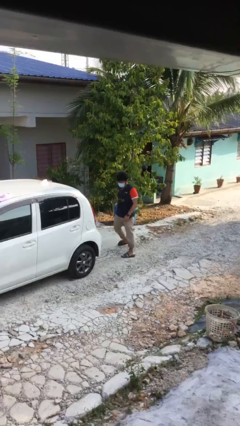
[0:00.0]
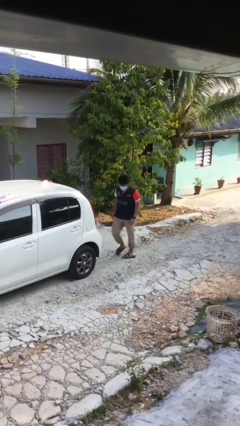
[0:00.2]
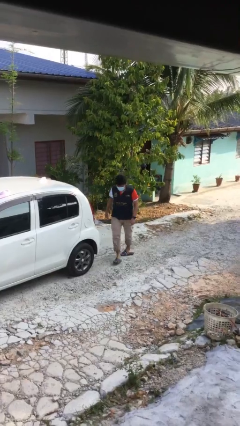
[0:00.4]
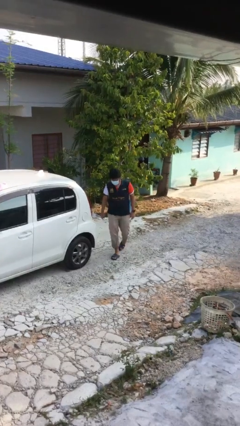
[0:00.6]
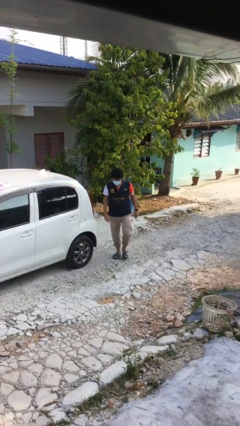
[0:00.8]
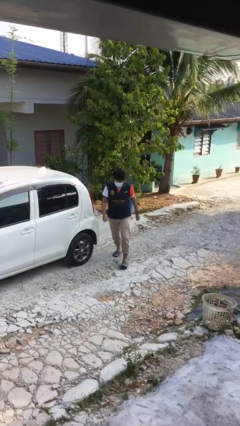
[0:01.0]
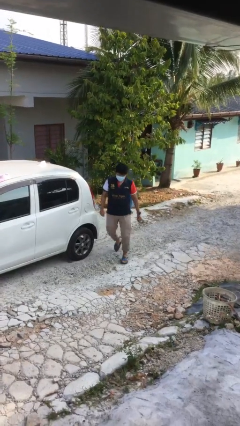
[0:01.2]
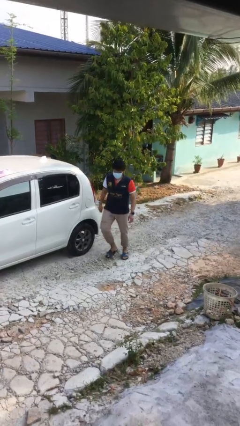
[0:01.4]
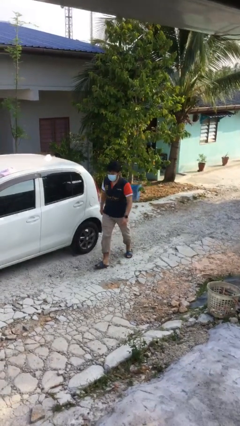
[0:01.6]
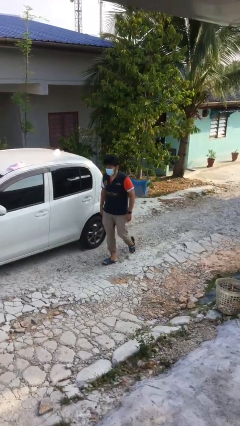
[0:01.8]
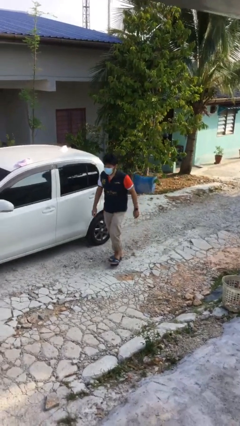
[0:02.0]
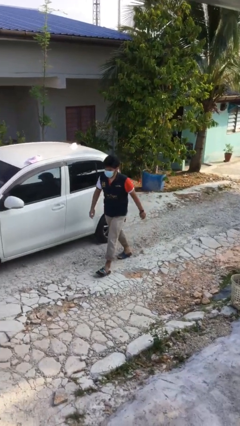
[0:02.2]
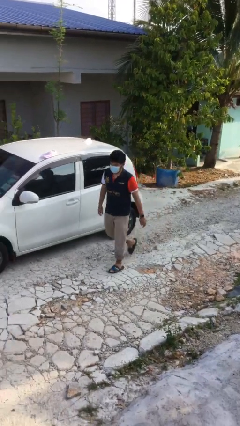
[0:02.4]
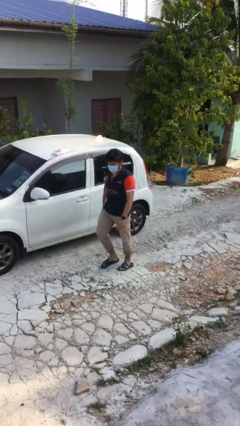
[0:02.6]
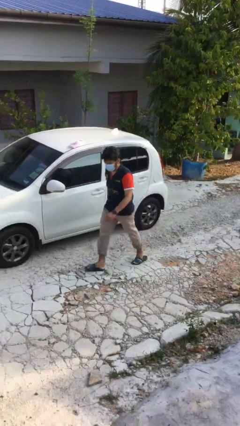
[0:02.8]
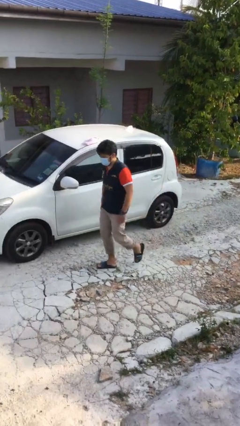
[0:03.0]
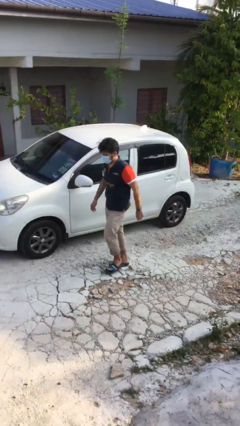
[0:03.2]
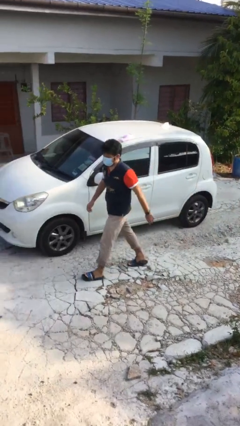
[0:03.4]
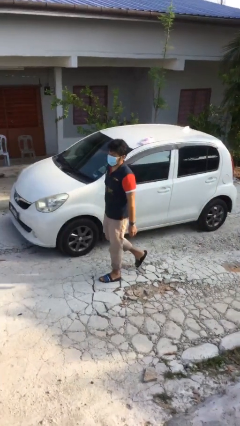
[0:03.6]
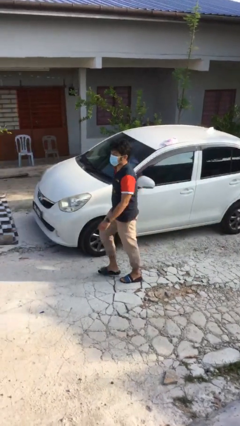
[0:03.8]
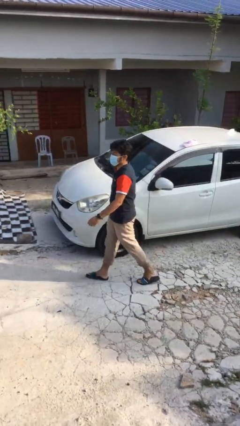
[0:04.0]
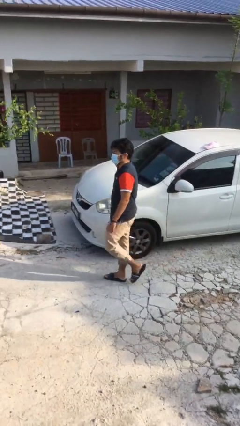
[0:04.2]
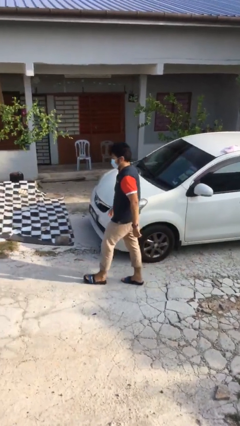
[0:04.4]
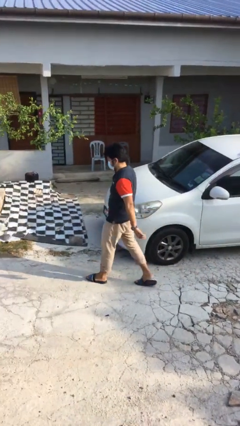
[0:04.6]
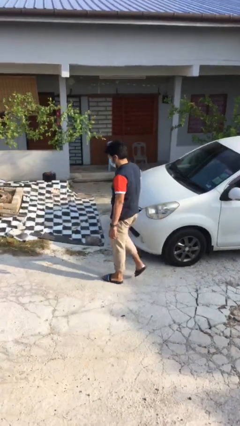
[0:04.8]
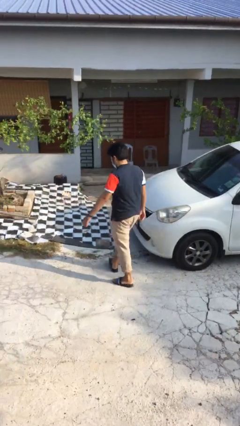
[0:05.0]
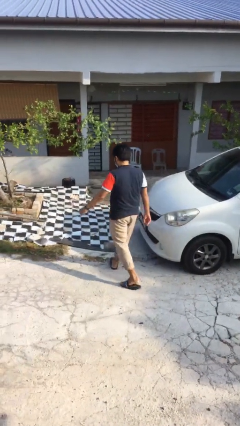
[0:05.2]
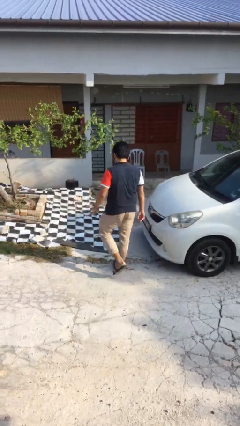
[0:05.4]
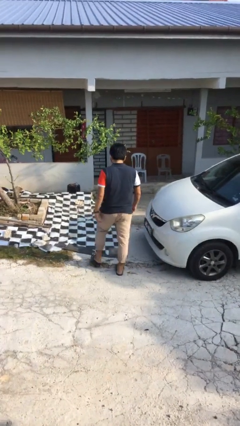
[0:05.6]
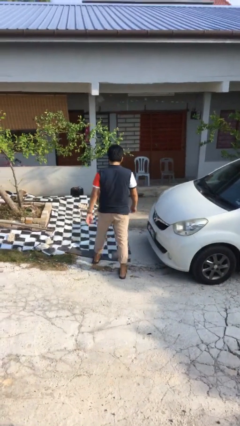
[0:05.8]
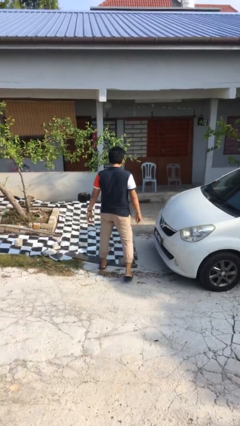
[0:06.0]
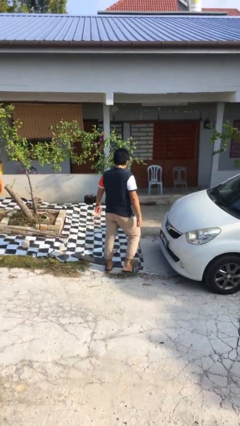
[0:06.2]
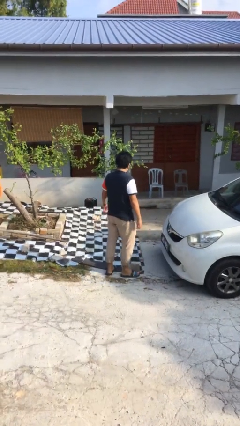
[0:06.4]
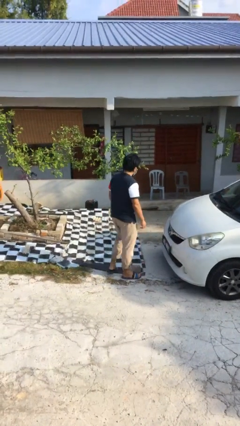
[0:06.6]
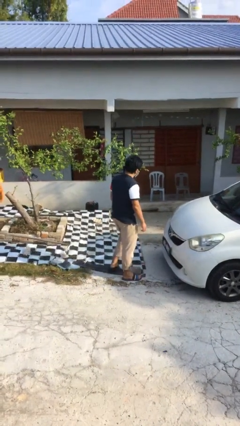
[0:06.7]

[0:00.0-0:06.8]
person walks around car

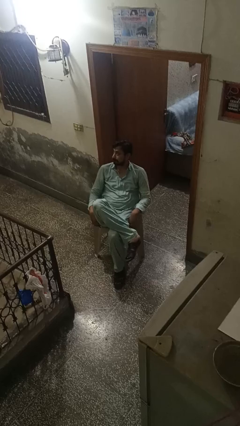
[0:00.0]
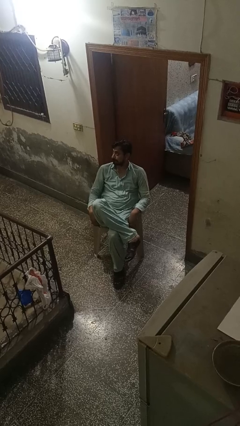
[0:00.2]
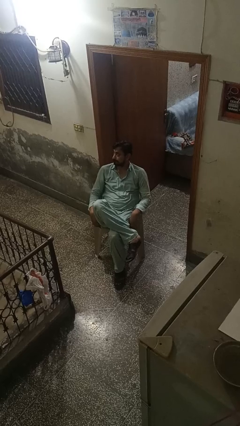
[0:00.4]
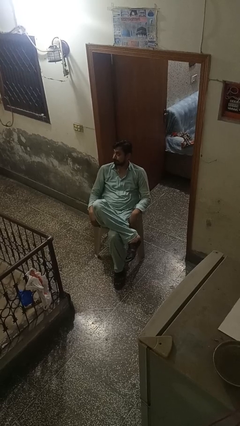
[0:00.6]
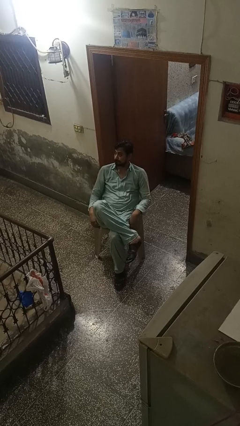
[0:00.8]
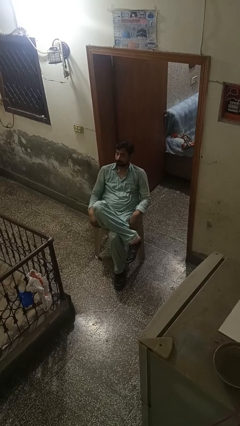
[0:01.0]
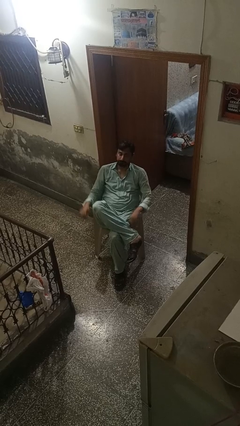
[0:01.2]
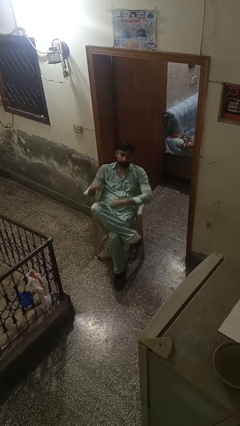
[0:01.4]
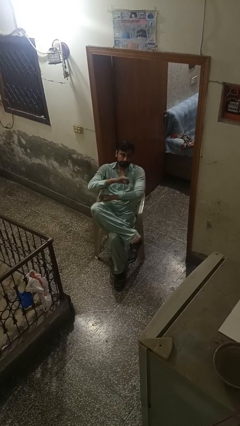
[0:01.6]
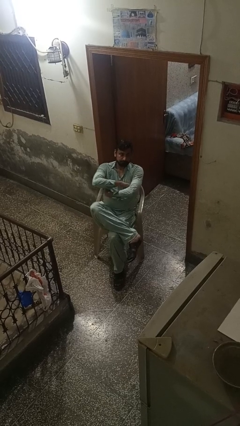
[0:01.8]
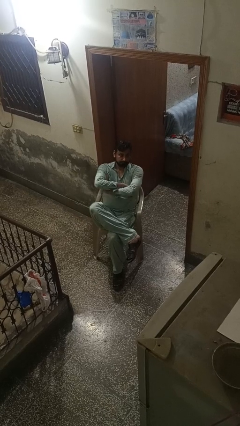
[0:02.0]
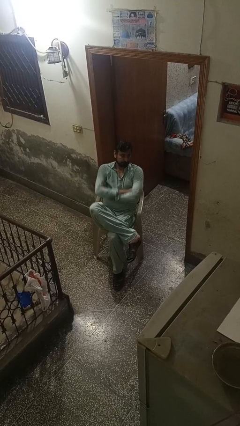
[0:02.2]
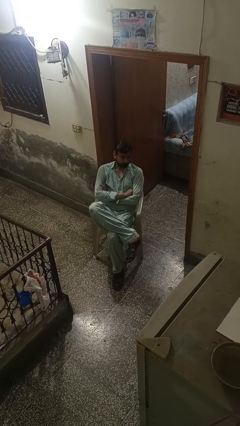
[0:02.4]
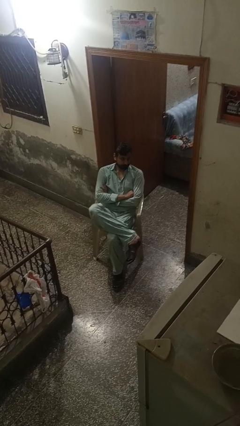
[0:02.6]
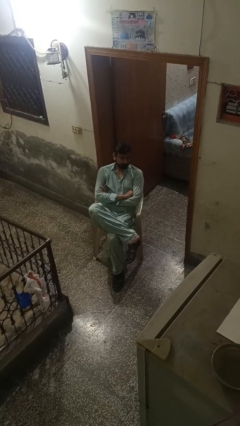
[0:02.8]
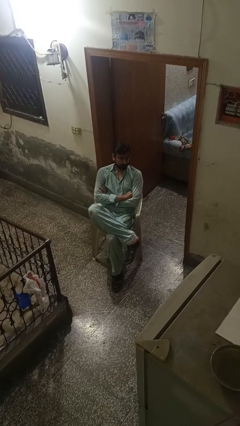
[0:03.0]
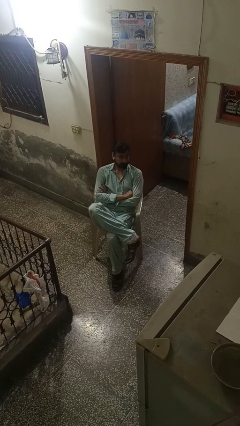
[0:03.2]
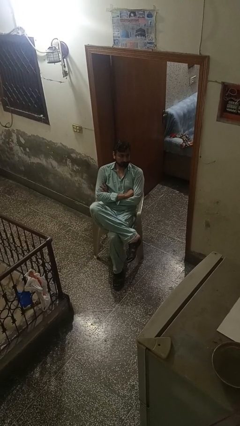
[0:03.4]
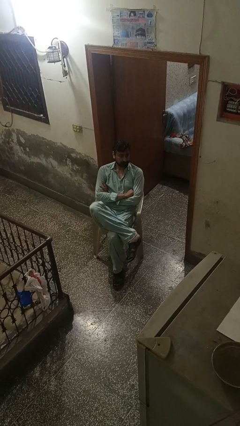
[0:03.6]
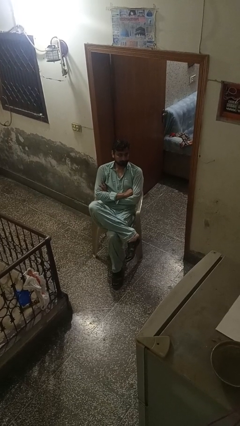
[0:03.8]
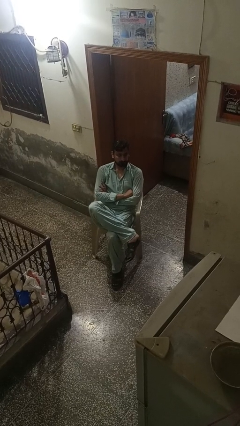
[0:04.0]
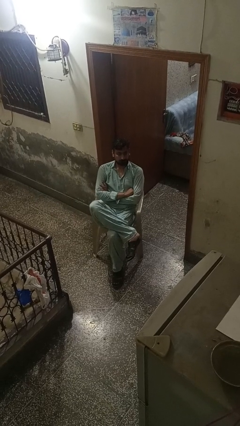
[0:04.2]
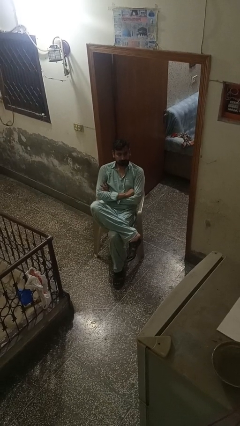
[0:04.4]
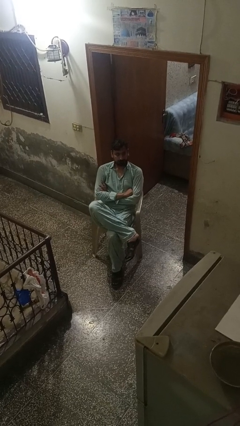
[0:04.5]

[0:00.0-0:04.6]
person crosses arms

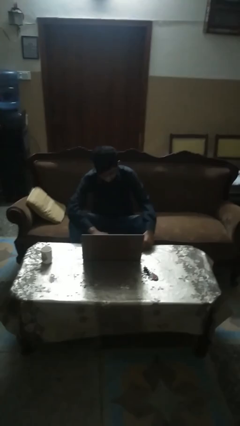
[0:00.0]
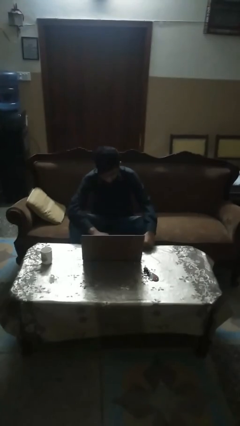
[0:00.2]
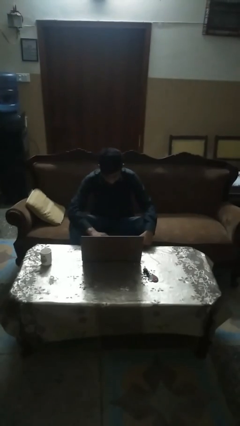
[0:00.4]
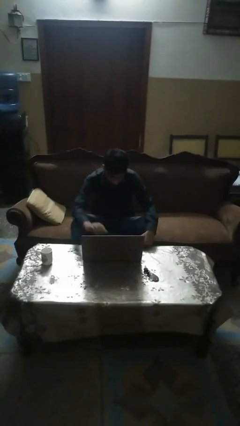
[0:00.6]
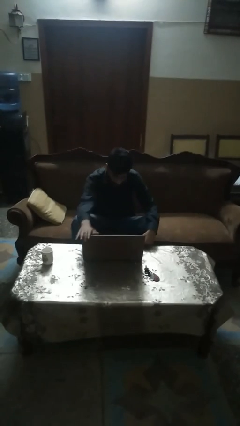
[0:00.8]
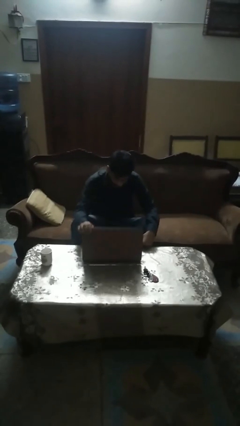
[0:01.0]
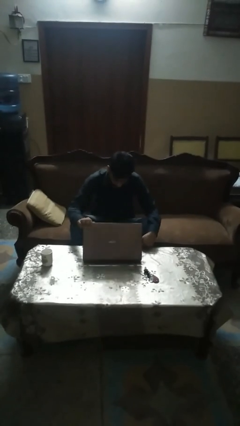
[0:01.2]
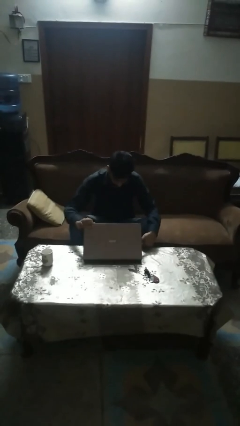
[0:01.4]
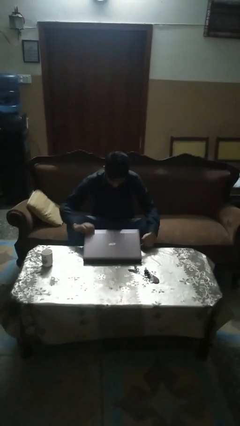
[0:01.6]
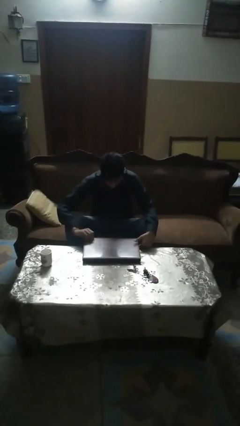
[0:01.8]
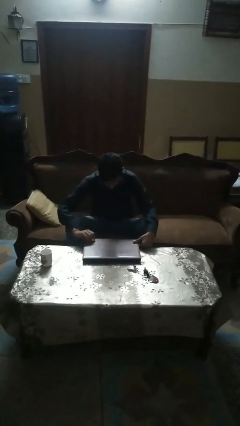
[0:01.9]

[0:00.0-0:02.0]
person closes laptop

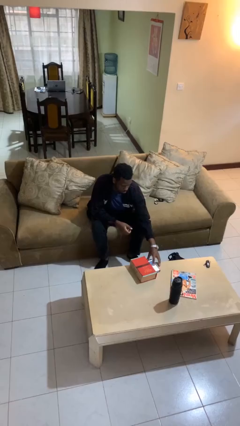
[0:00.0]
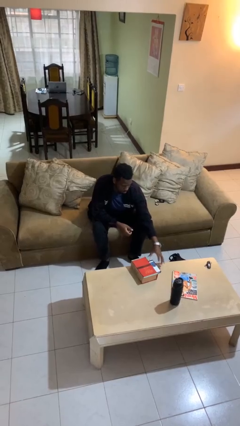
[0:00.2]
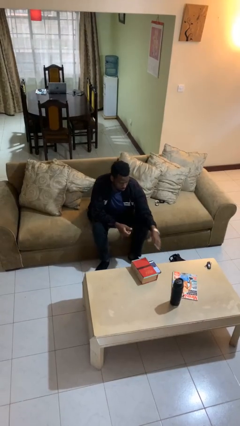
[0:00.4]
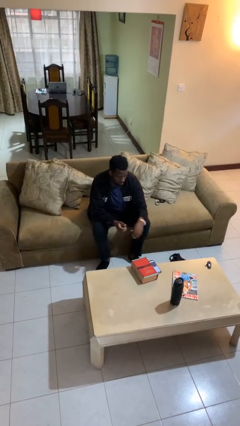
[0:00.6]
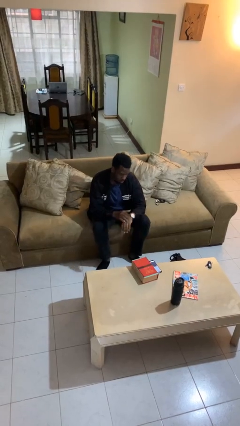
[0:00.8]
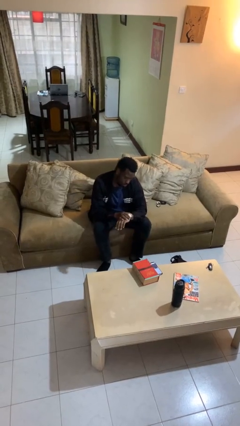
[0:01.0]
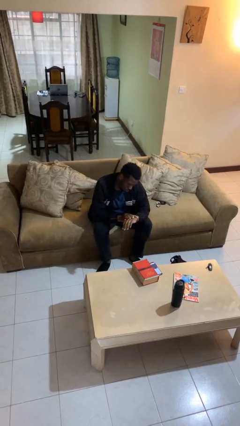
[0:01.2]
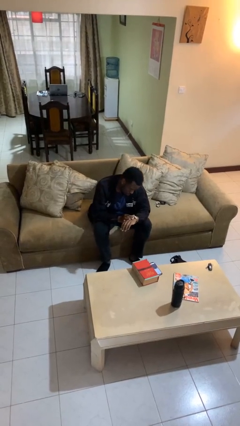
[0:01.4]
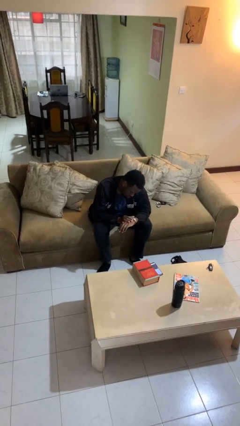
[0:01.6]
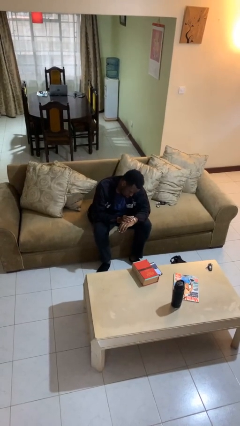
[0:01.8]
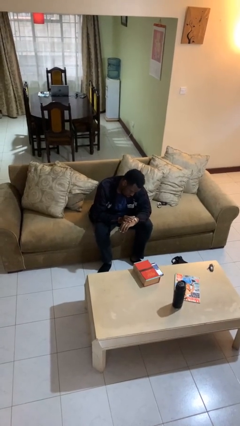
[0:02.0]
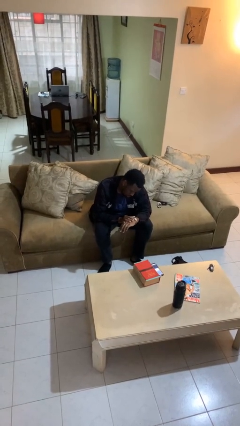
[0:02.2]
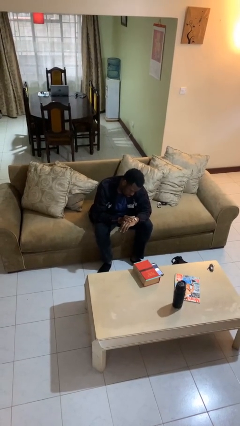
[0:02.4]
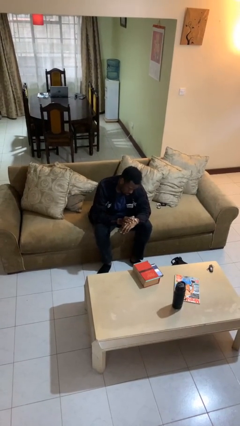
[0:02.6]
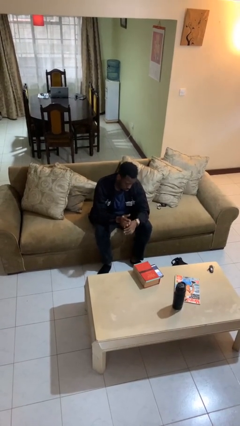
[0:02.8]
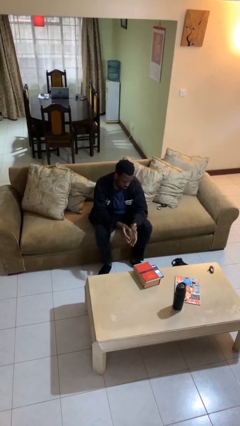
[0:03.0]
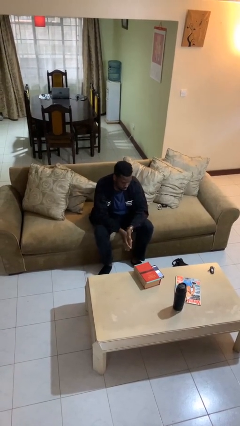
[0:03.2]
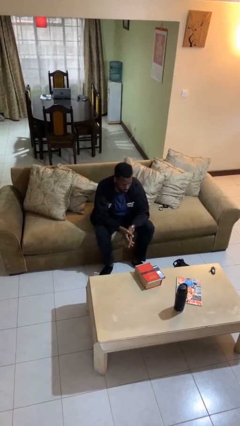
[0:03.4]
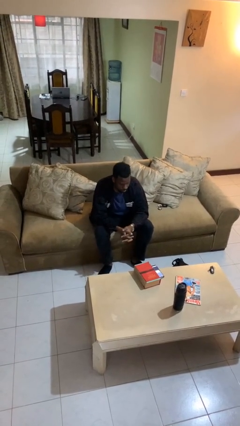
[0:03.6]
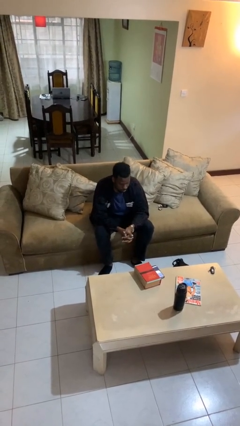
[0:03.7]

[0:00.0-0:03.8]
person looks at wristwatch

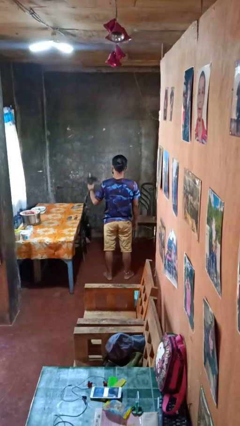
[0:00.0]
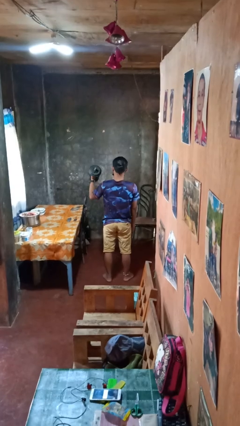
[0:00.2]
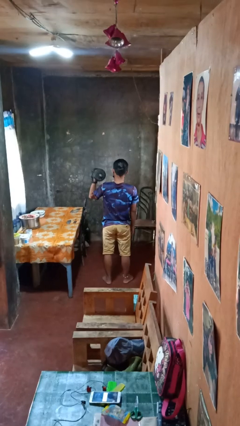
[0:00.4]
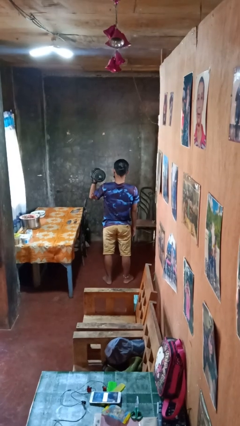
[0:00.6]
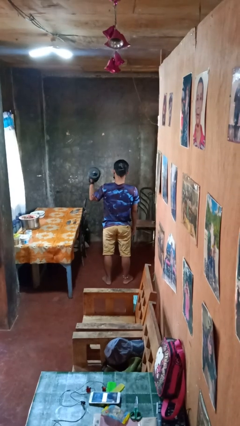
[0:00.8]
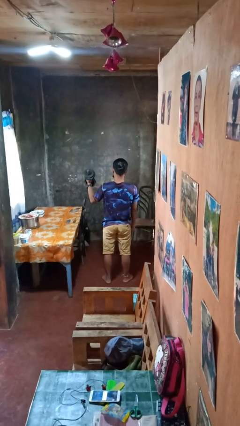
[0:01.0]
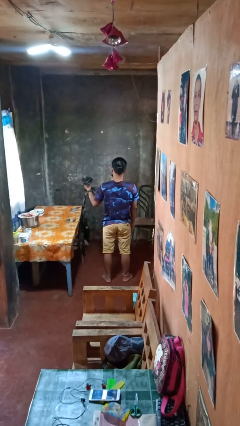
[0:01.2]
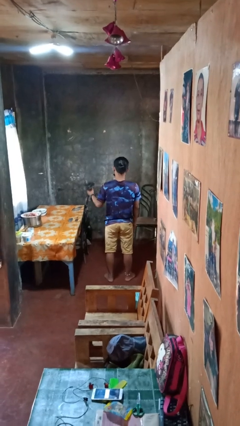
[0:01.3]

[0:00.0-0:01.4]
person lifts dumbbells
